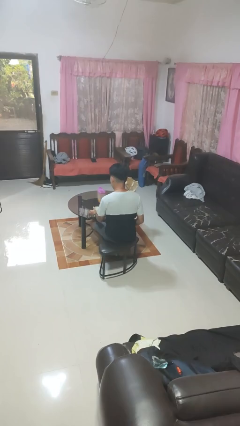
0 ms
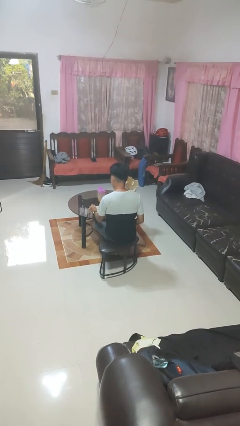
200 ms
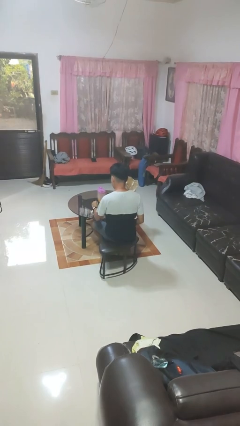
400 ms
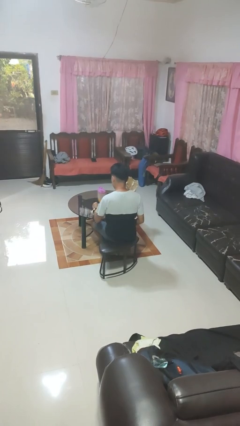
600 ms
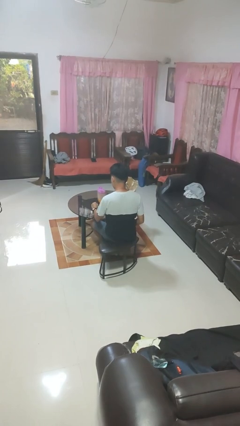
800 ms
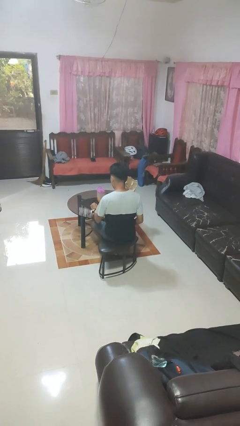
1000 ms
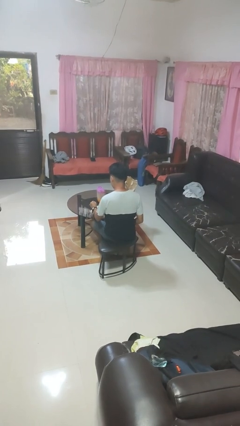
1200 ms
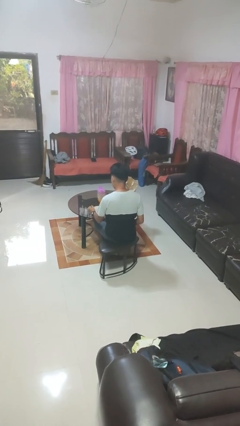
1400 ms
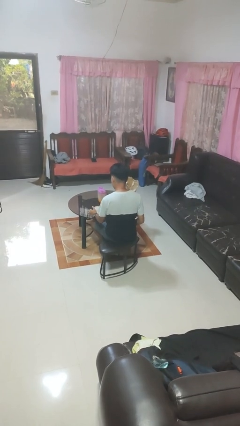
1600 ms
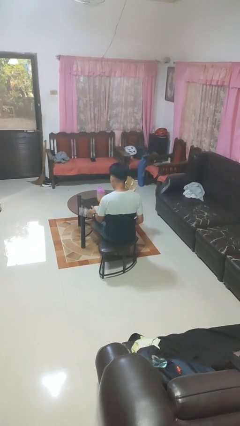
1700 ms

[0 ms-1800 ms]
person stirs mug

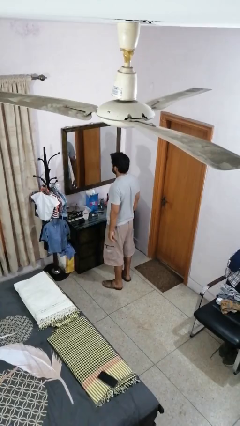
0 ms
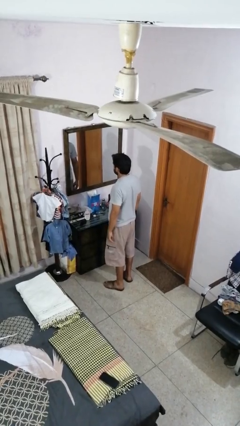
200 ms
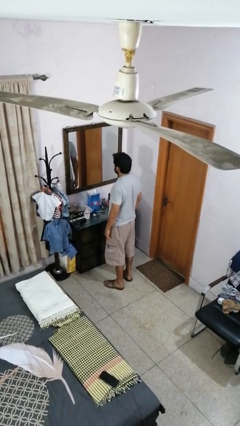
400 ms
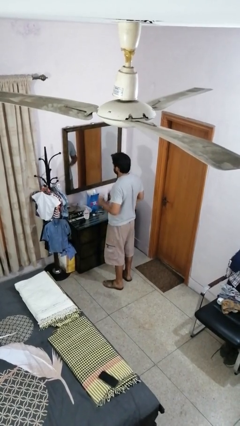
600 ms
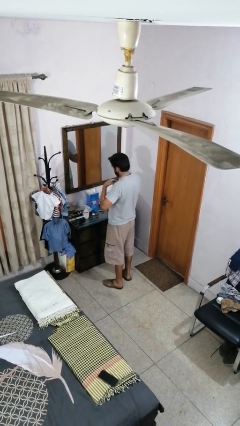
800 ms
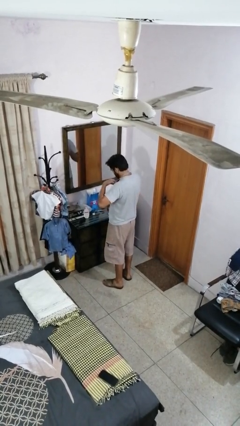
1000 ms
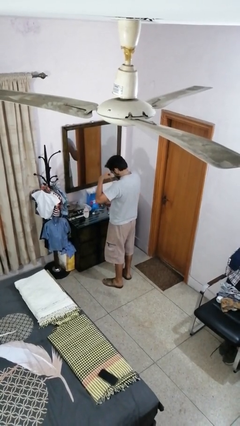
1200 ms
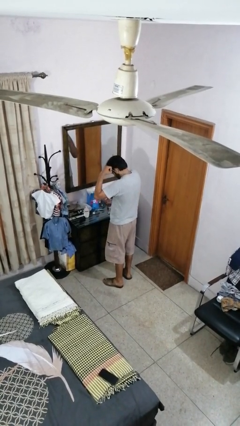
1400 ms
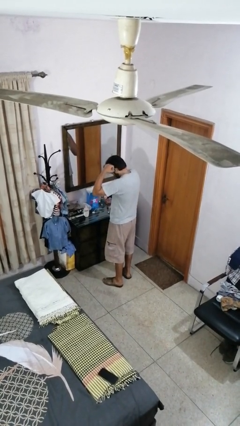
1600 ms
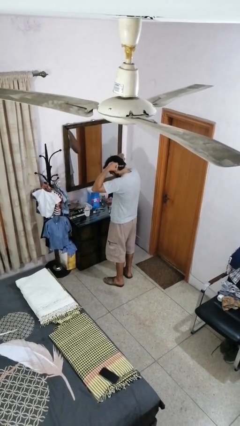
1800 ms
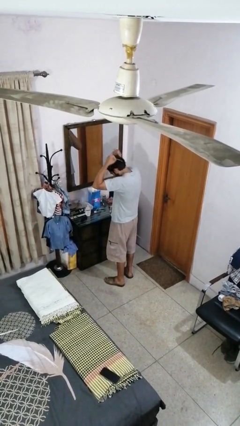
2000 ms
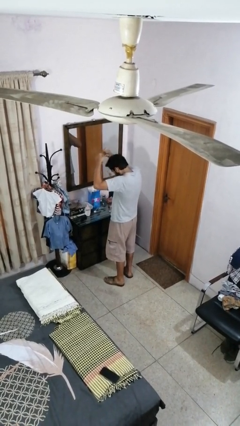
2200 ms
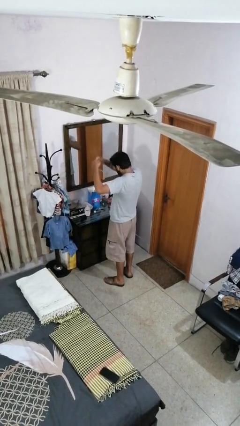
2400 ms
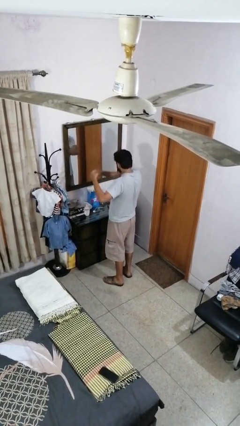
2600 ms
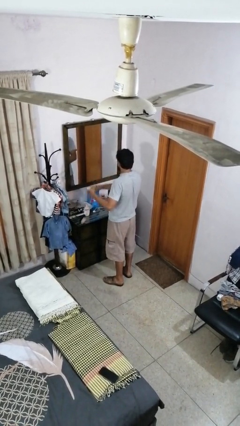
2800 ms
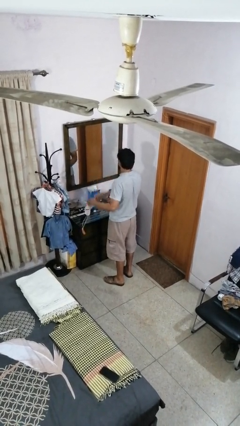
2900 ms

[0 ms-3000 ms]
person takes off necklace

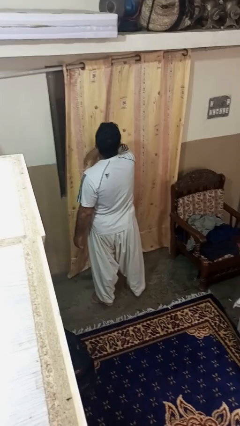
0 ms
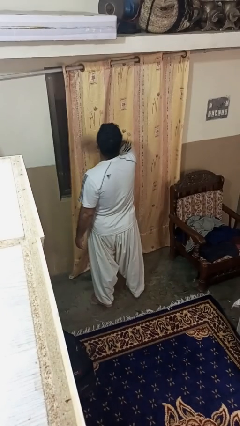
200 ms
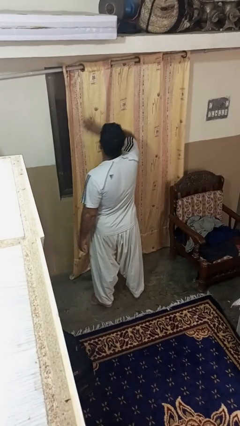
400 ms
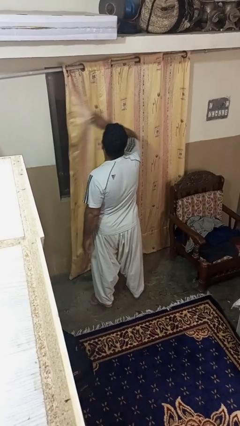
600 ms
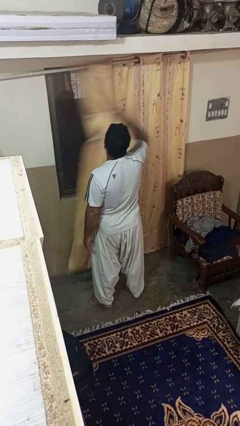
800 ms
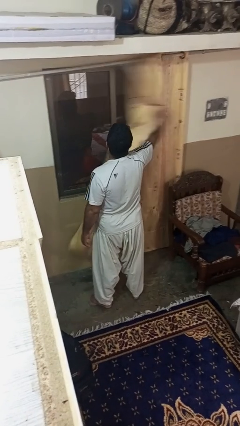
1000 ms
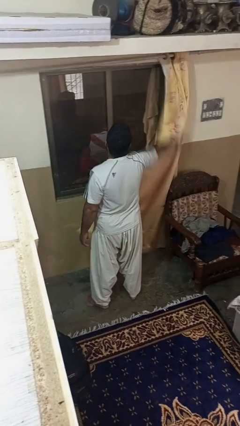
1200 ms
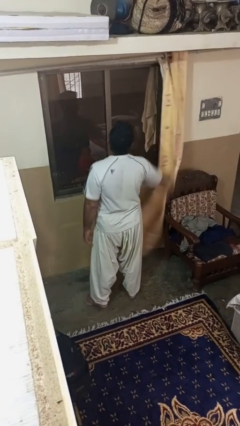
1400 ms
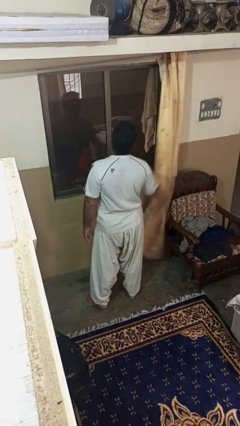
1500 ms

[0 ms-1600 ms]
person opens curtains

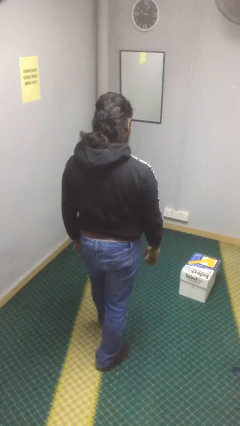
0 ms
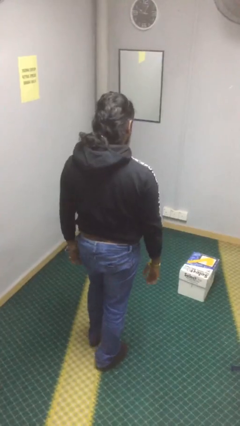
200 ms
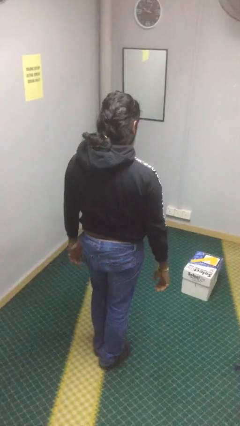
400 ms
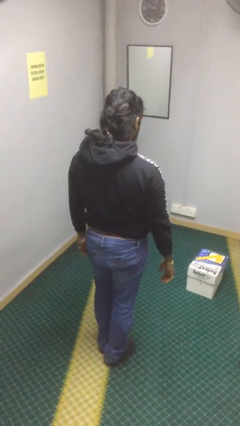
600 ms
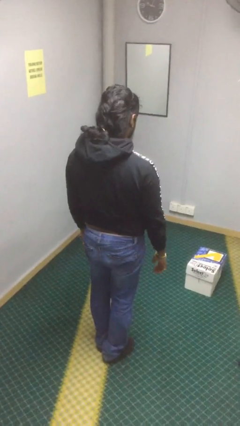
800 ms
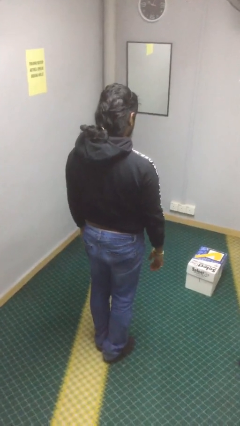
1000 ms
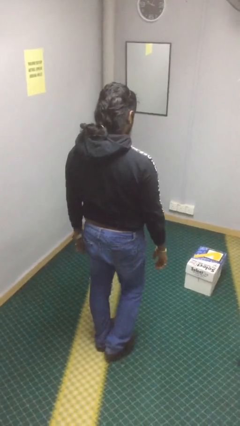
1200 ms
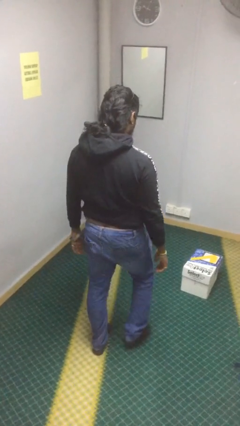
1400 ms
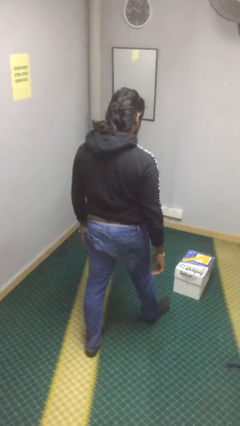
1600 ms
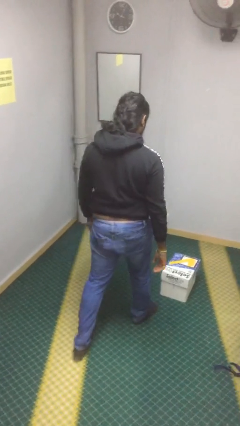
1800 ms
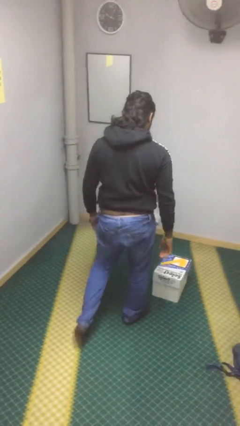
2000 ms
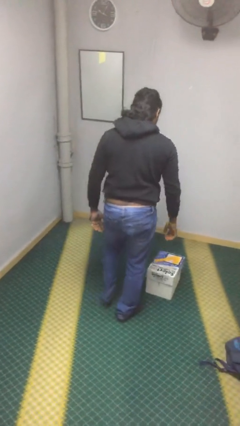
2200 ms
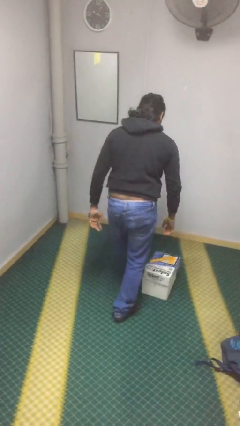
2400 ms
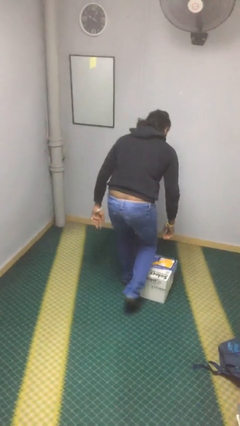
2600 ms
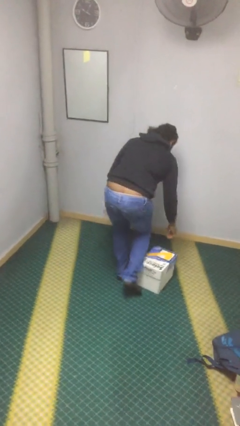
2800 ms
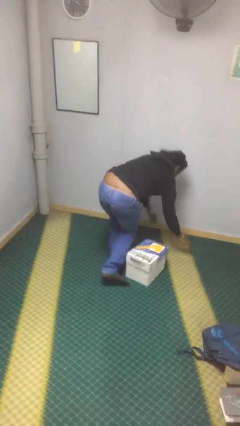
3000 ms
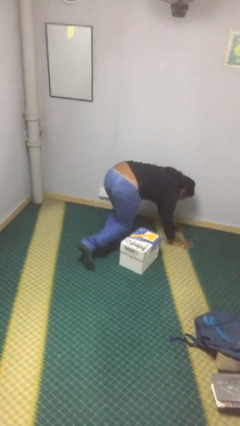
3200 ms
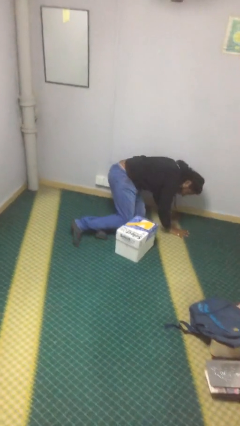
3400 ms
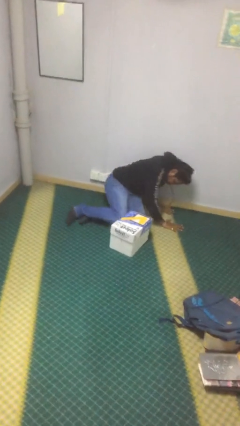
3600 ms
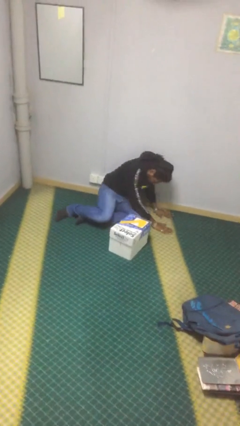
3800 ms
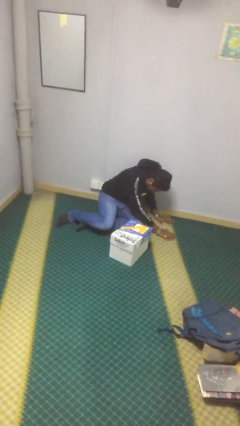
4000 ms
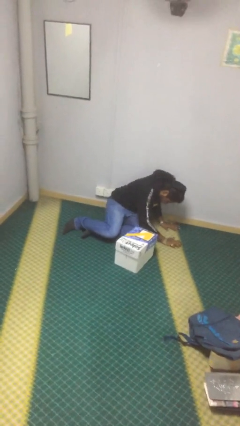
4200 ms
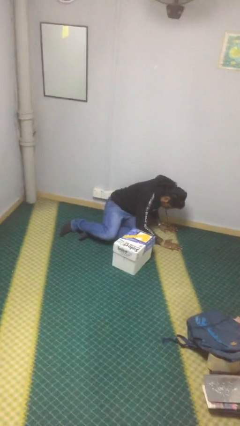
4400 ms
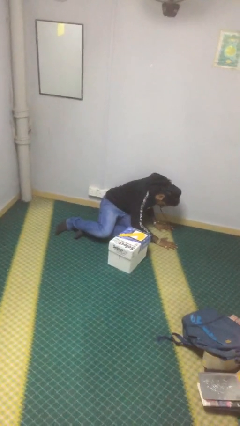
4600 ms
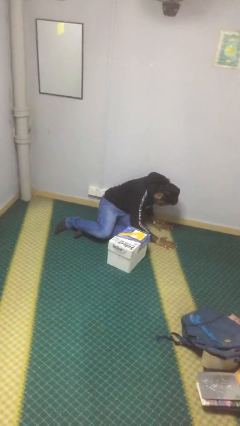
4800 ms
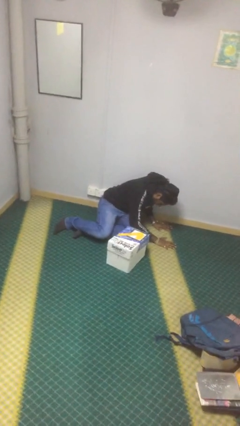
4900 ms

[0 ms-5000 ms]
person trips on object on floor

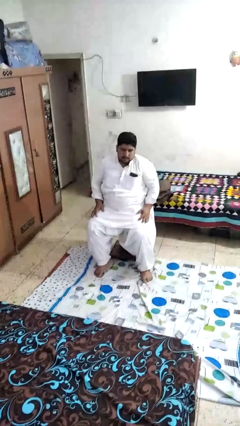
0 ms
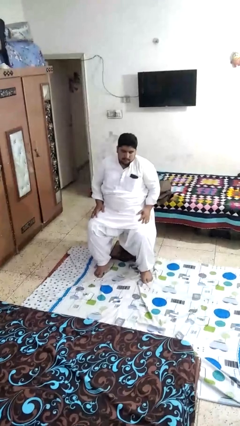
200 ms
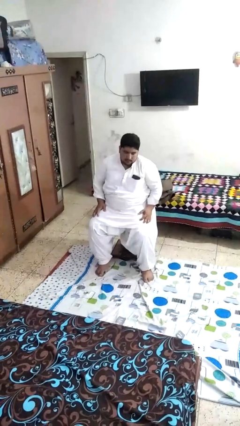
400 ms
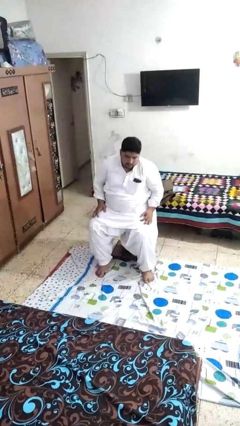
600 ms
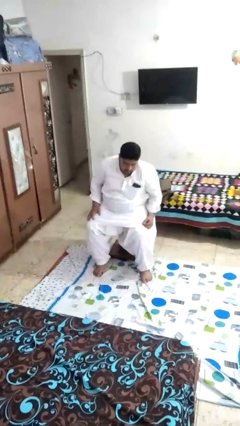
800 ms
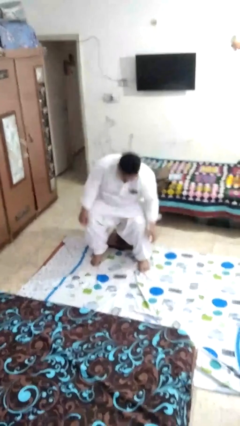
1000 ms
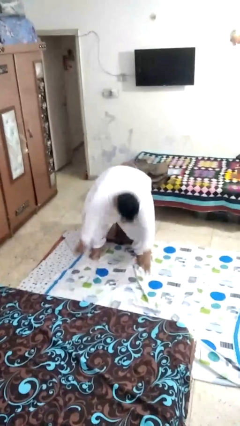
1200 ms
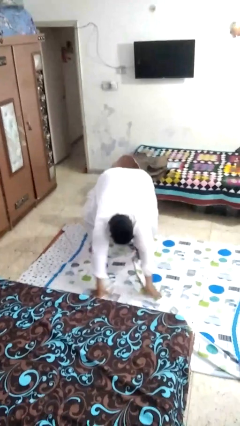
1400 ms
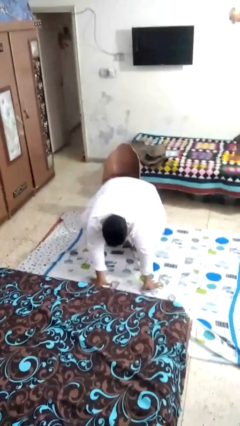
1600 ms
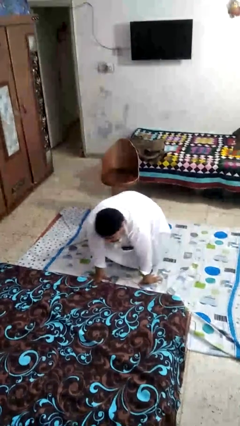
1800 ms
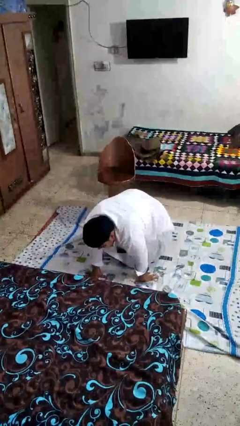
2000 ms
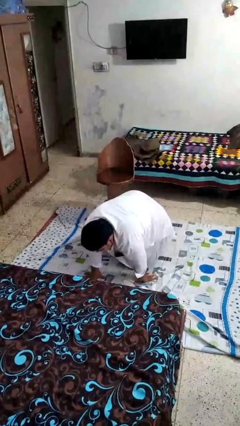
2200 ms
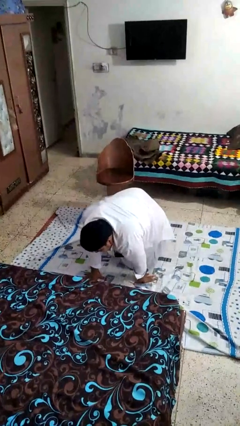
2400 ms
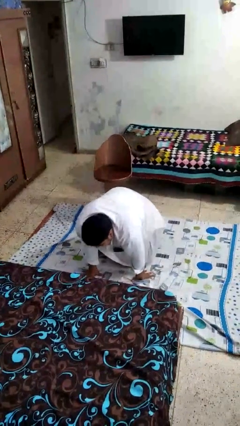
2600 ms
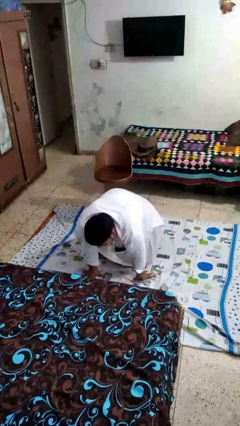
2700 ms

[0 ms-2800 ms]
person falls from chair

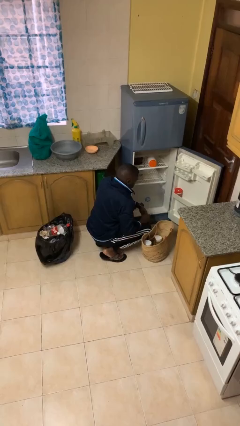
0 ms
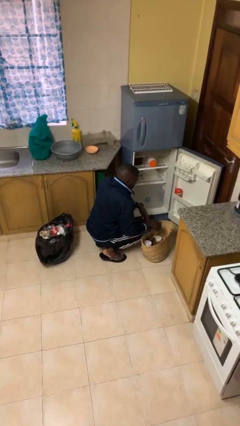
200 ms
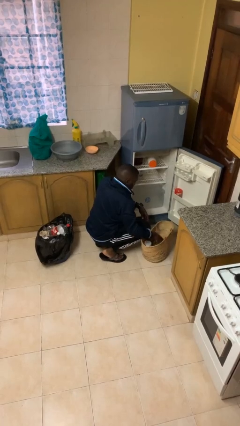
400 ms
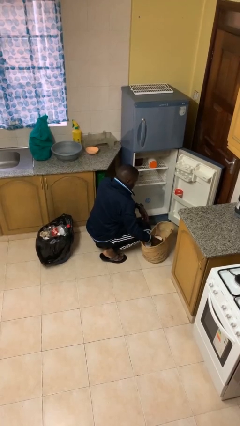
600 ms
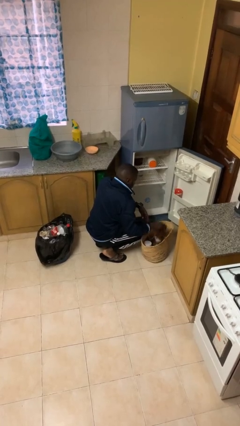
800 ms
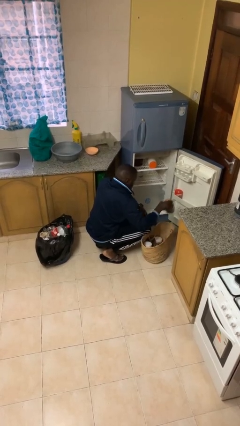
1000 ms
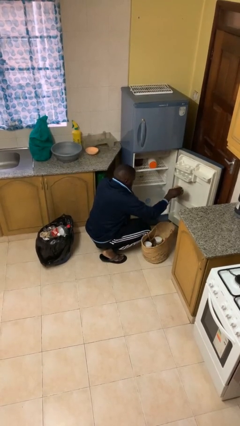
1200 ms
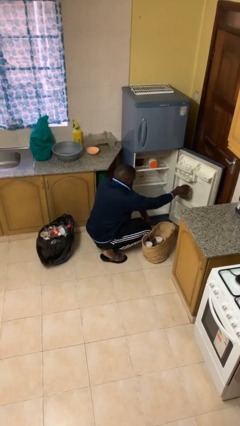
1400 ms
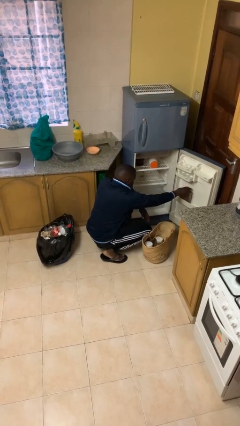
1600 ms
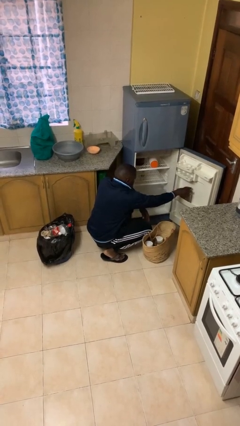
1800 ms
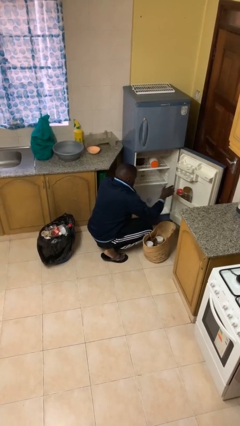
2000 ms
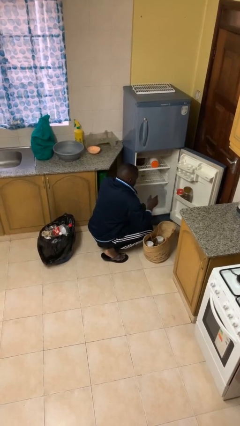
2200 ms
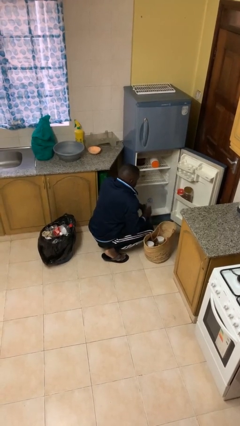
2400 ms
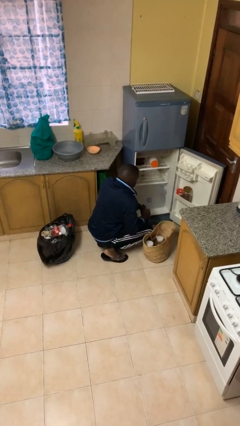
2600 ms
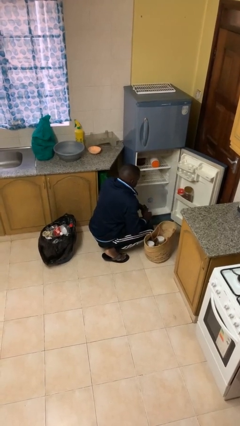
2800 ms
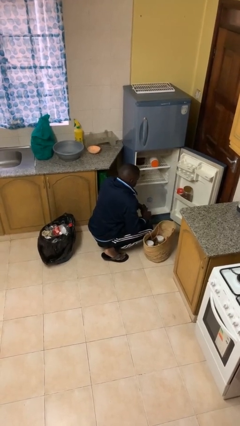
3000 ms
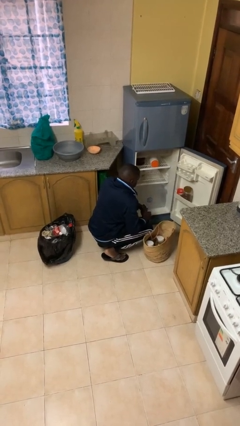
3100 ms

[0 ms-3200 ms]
person loads groceries into refrigerator
